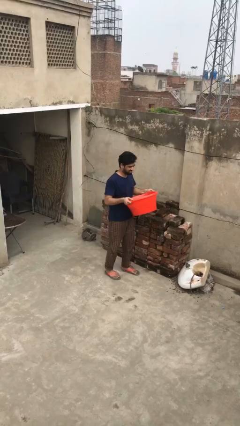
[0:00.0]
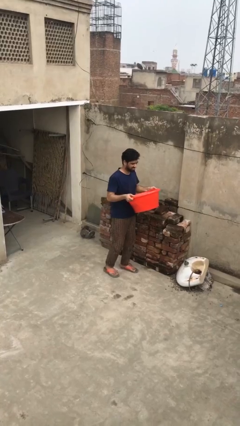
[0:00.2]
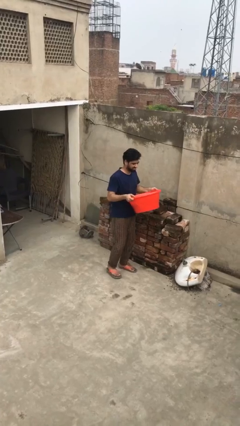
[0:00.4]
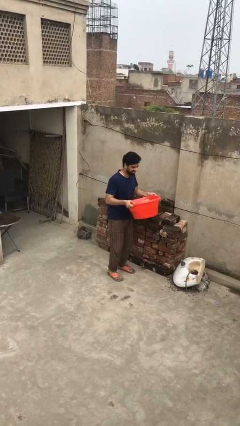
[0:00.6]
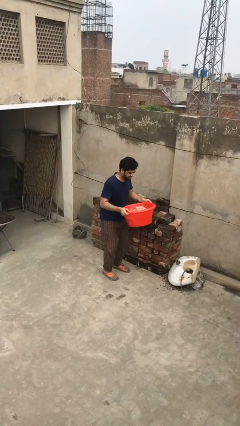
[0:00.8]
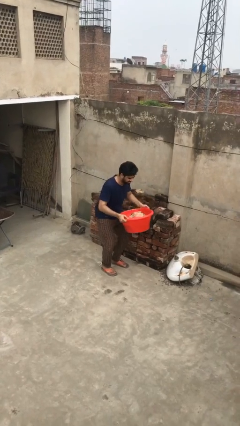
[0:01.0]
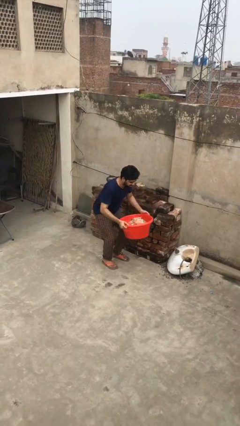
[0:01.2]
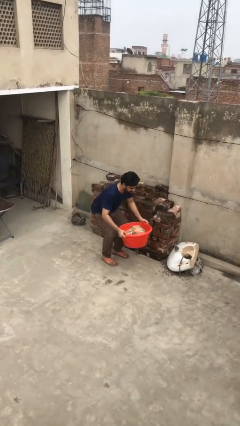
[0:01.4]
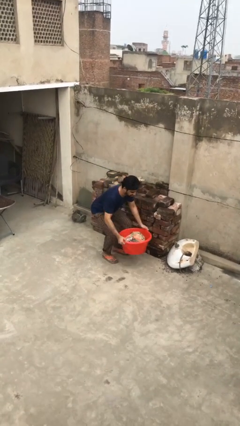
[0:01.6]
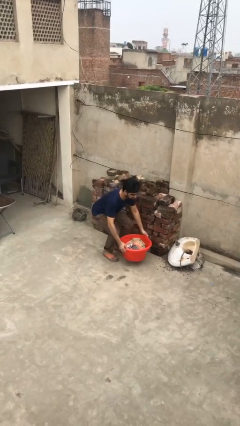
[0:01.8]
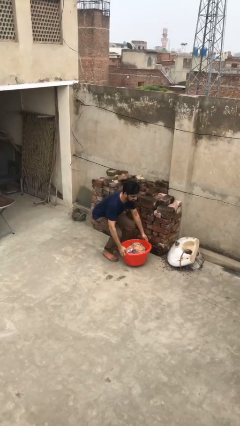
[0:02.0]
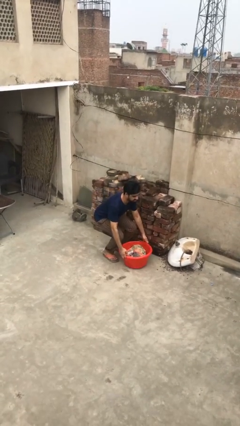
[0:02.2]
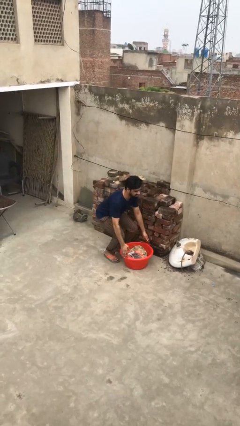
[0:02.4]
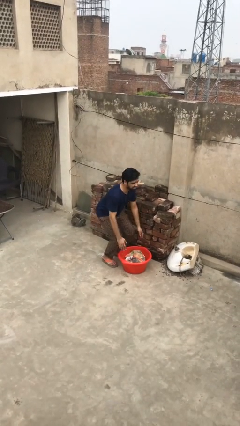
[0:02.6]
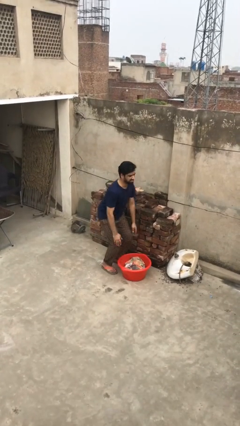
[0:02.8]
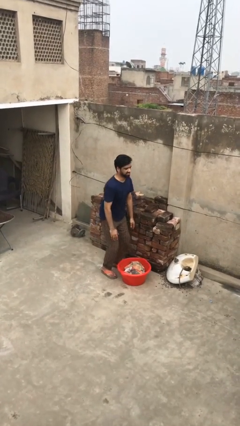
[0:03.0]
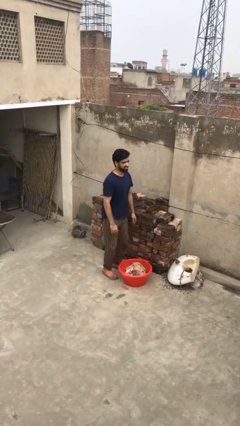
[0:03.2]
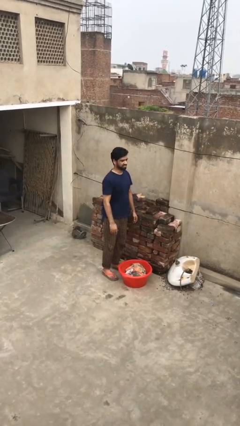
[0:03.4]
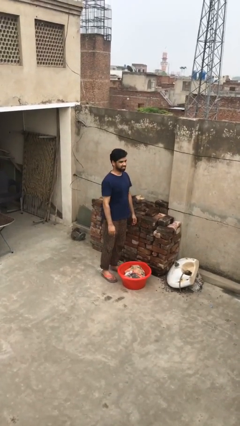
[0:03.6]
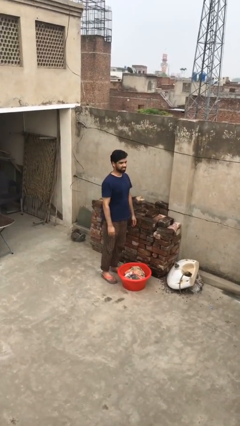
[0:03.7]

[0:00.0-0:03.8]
person puts down object on floor

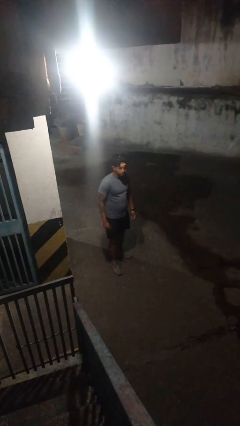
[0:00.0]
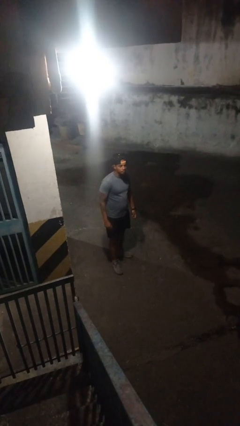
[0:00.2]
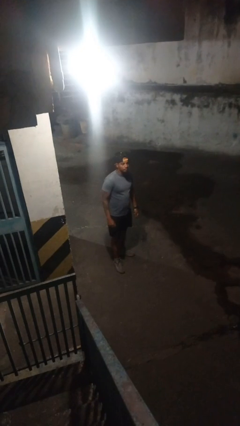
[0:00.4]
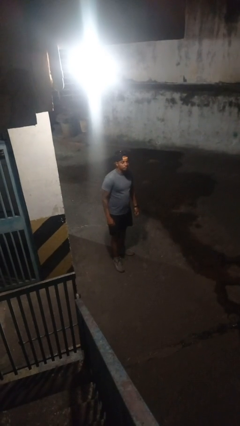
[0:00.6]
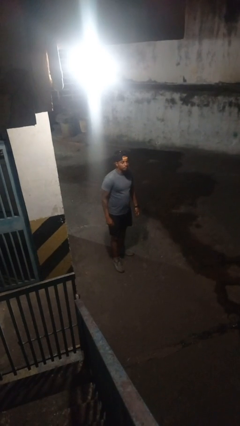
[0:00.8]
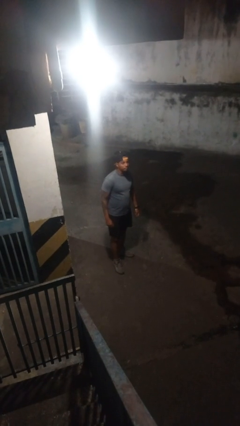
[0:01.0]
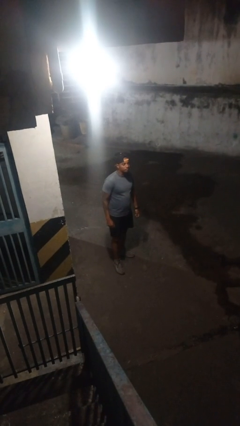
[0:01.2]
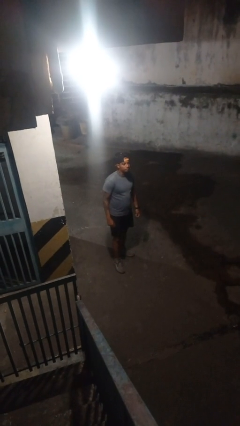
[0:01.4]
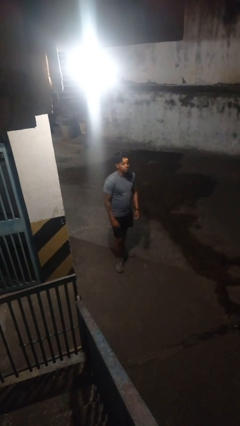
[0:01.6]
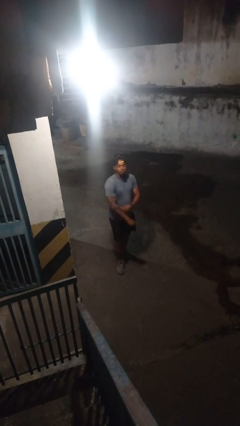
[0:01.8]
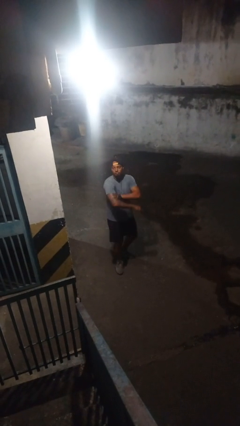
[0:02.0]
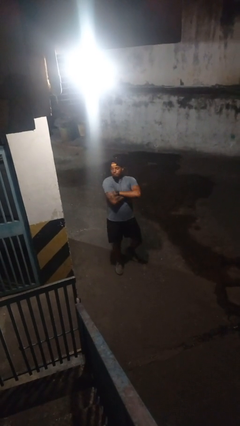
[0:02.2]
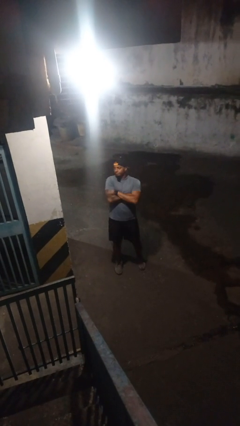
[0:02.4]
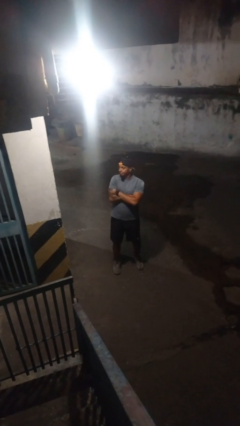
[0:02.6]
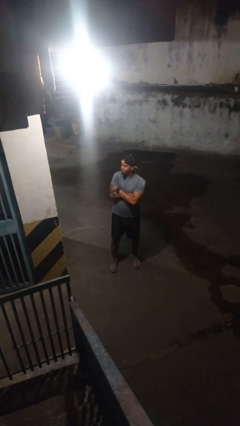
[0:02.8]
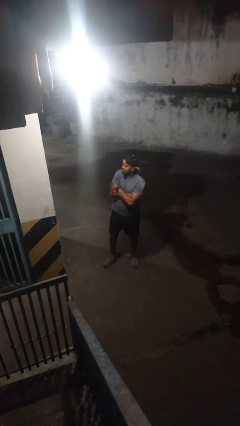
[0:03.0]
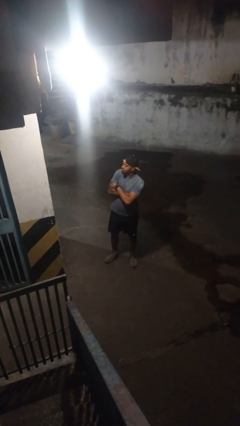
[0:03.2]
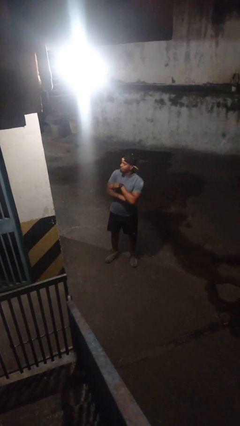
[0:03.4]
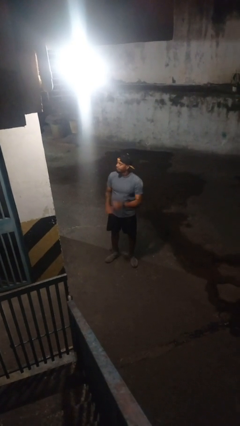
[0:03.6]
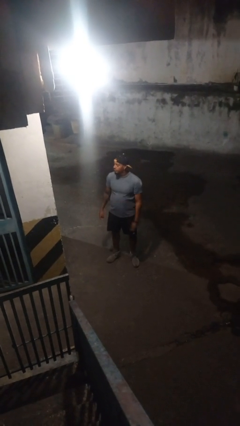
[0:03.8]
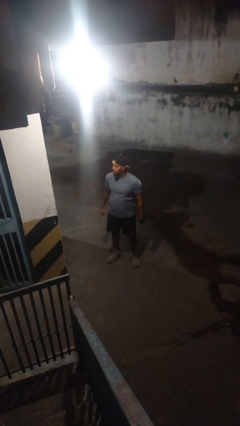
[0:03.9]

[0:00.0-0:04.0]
person crosses arms

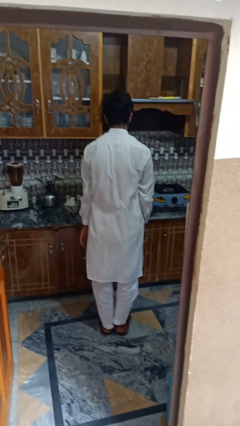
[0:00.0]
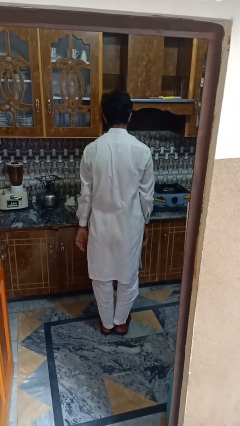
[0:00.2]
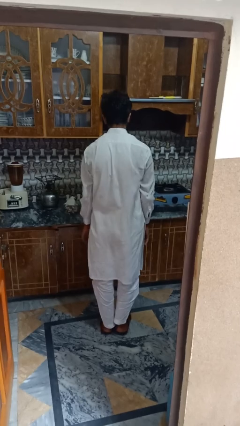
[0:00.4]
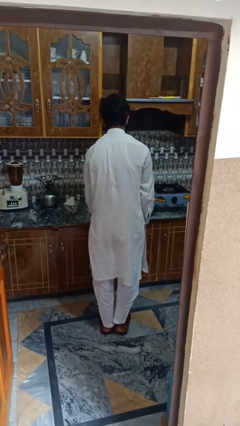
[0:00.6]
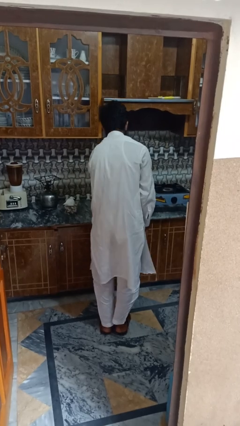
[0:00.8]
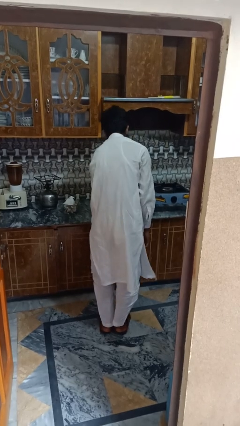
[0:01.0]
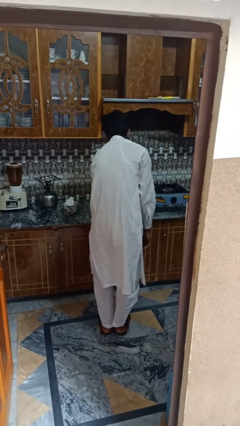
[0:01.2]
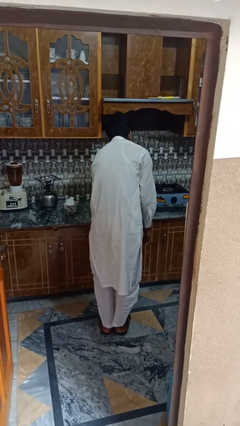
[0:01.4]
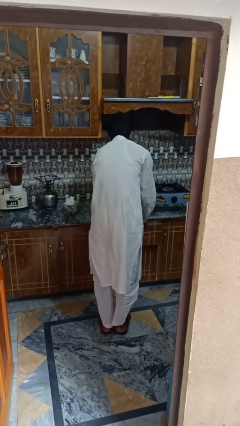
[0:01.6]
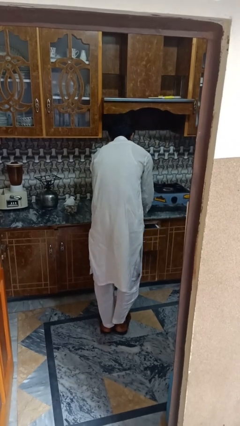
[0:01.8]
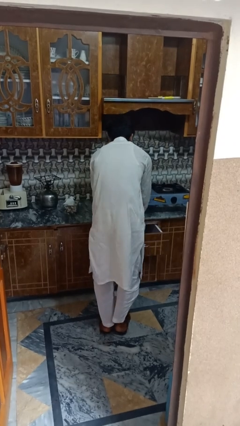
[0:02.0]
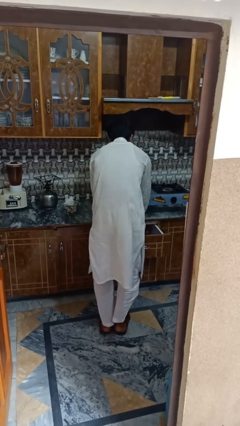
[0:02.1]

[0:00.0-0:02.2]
person searches in kitchen drawer

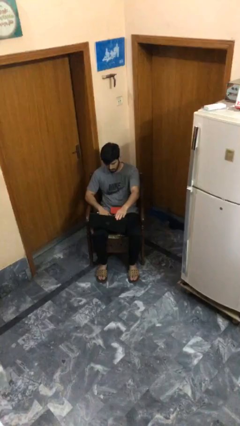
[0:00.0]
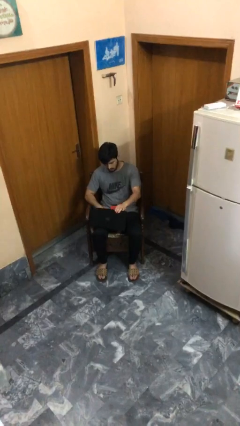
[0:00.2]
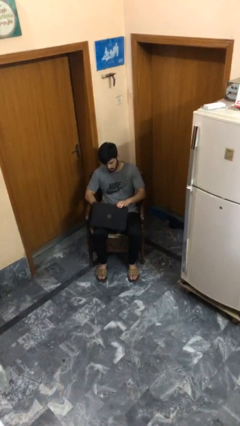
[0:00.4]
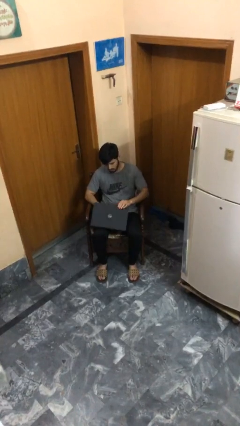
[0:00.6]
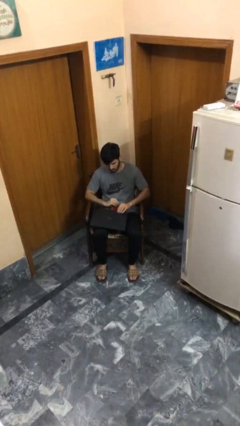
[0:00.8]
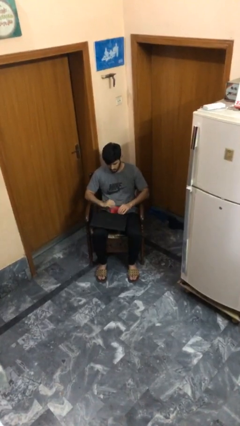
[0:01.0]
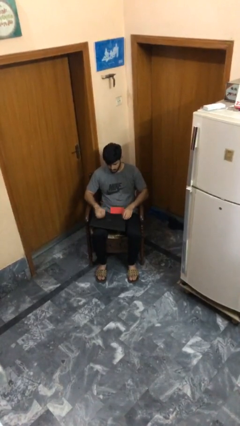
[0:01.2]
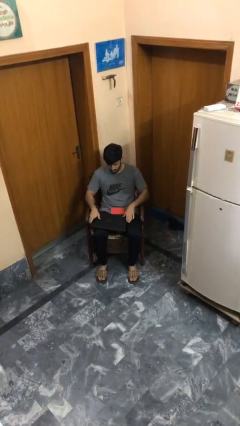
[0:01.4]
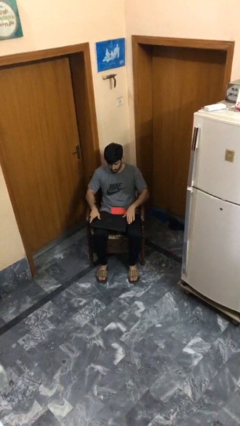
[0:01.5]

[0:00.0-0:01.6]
person closes laptop

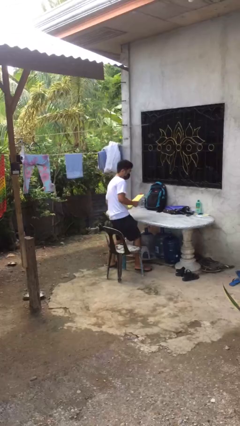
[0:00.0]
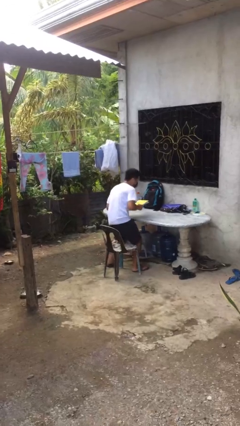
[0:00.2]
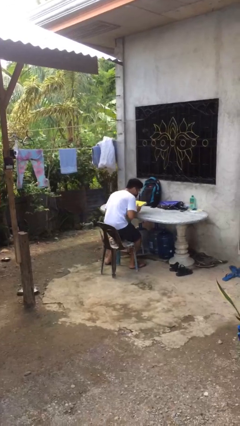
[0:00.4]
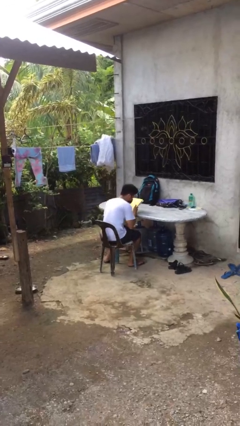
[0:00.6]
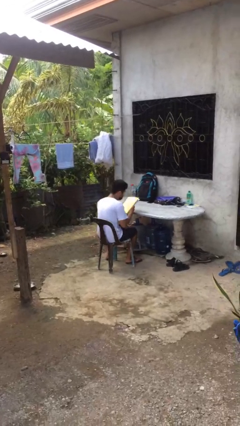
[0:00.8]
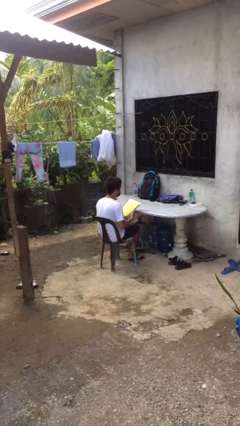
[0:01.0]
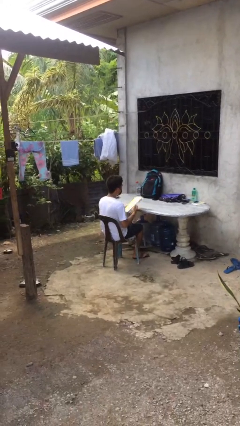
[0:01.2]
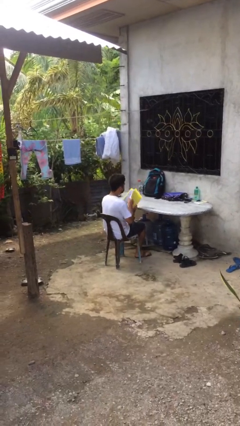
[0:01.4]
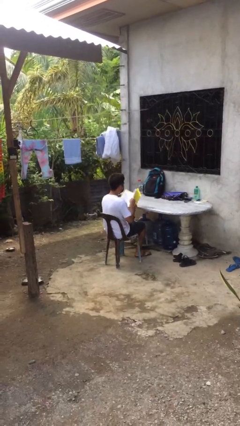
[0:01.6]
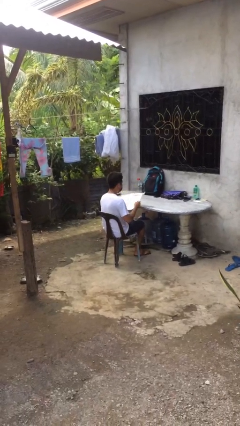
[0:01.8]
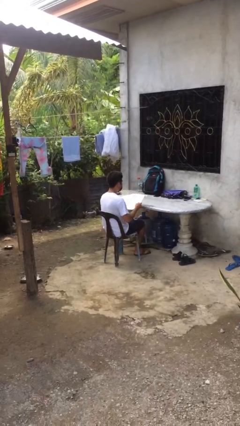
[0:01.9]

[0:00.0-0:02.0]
person sits down

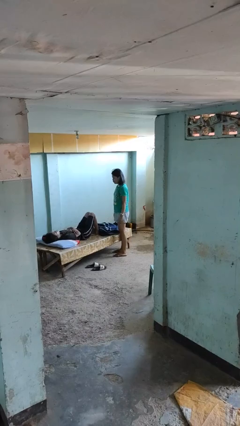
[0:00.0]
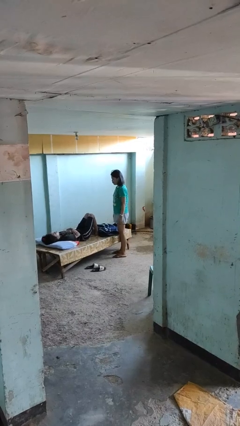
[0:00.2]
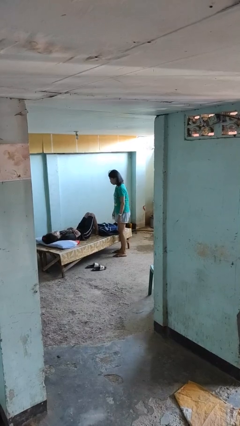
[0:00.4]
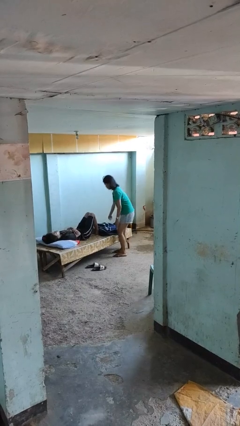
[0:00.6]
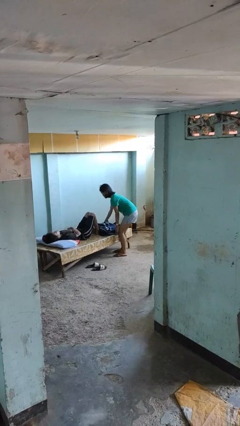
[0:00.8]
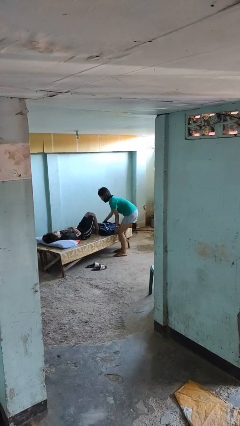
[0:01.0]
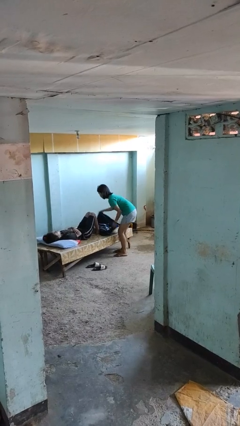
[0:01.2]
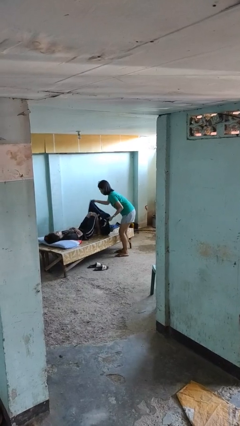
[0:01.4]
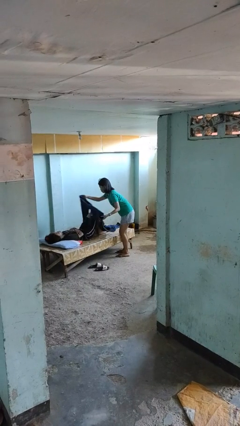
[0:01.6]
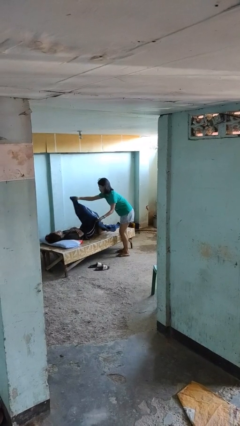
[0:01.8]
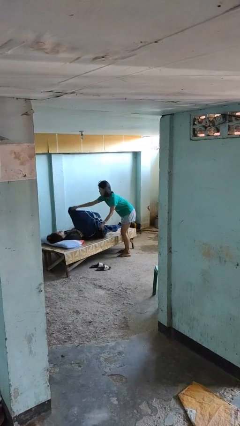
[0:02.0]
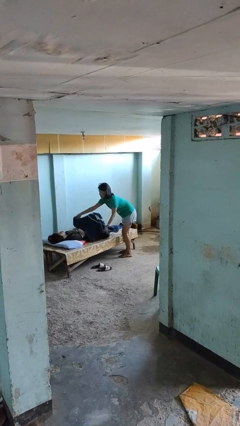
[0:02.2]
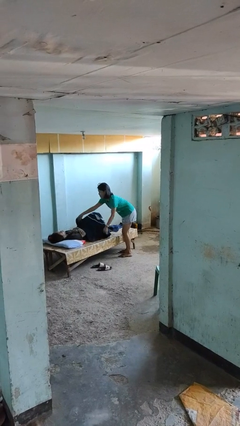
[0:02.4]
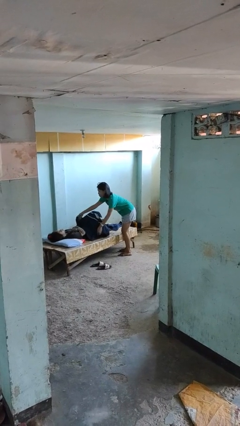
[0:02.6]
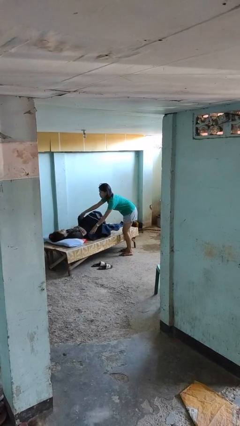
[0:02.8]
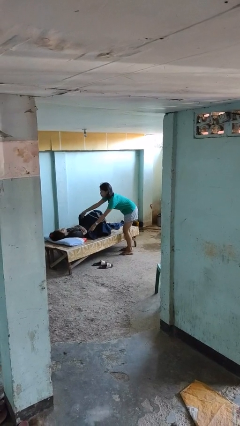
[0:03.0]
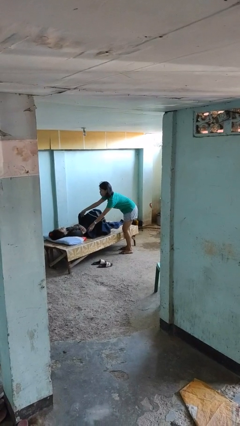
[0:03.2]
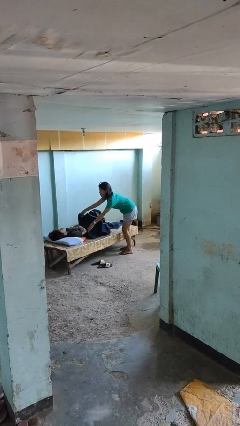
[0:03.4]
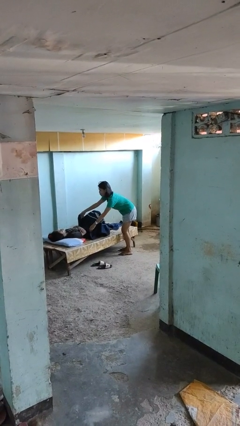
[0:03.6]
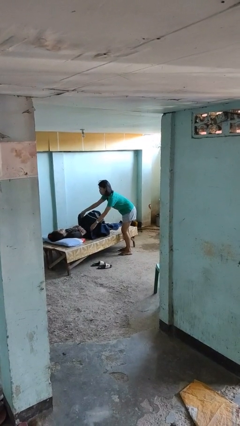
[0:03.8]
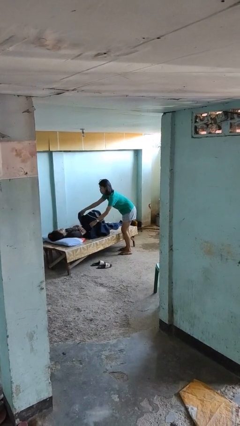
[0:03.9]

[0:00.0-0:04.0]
person covers friend with blanket

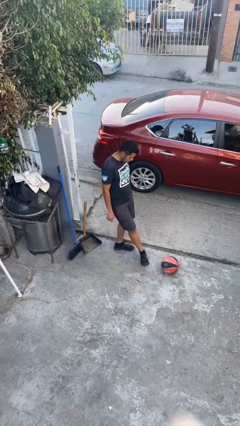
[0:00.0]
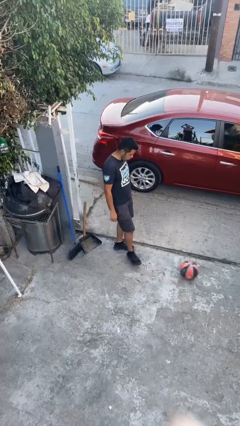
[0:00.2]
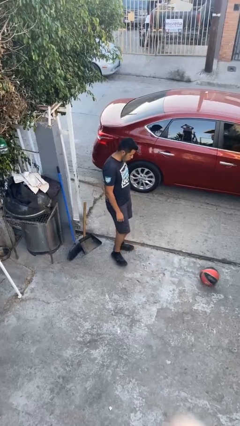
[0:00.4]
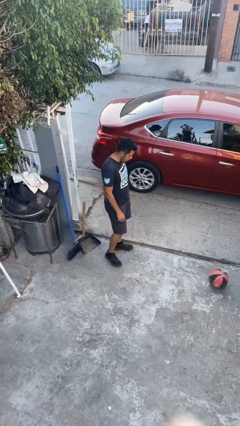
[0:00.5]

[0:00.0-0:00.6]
person kicks object to person
